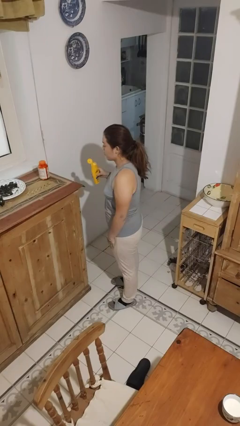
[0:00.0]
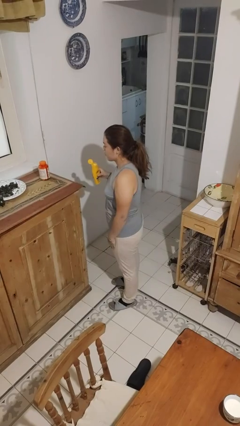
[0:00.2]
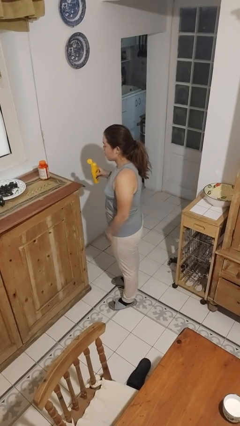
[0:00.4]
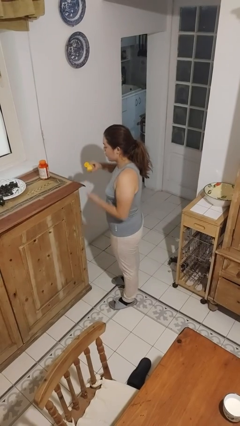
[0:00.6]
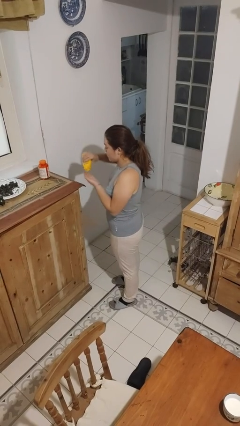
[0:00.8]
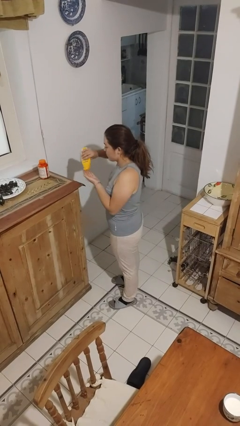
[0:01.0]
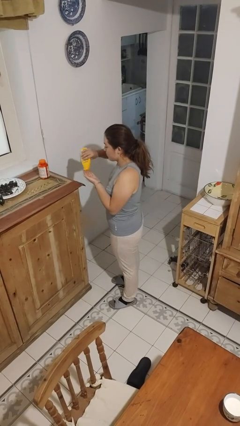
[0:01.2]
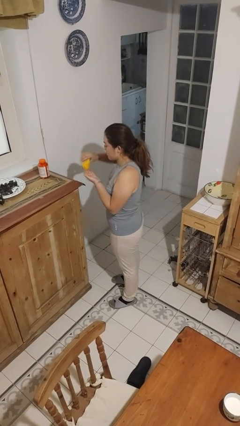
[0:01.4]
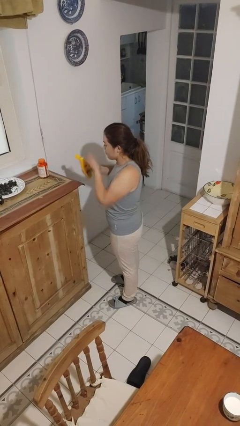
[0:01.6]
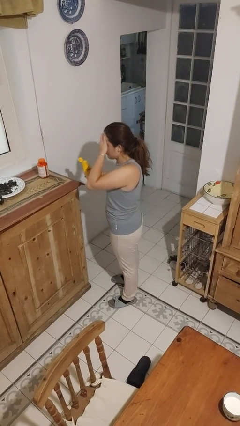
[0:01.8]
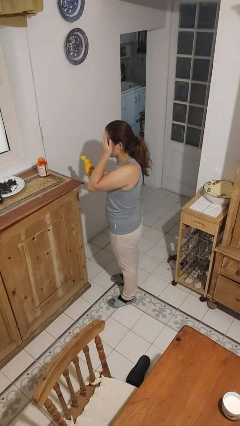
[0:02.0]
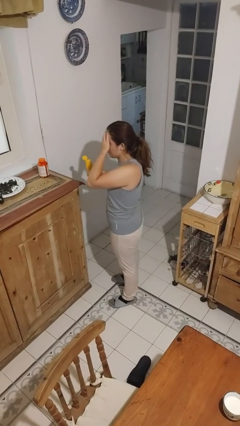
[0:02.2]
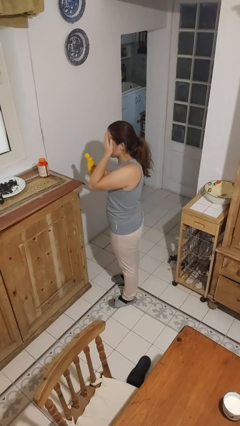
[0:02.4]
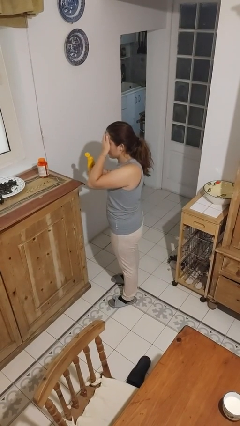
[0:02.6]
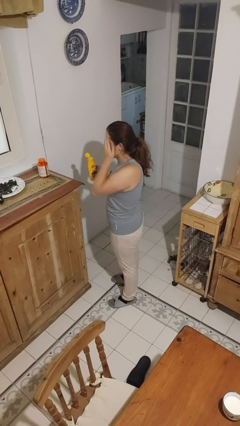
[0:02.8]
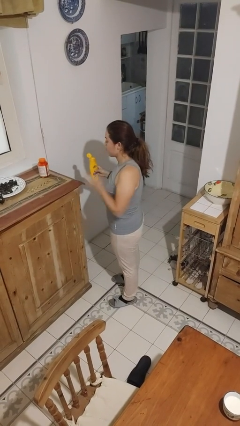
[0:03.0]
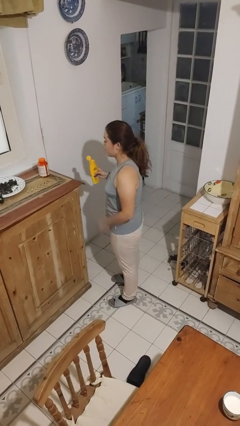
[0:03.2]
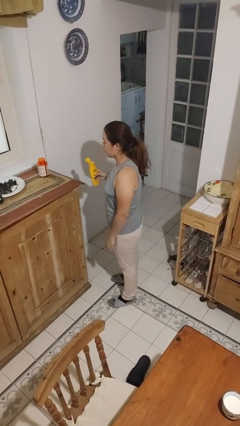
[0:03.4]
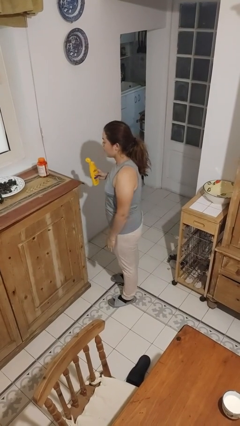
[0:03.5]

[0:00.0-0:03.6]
person applies sunscreen

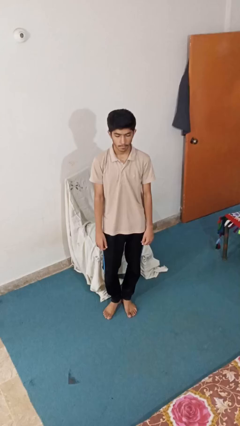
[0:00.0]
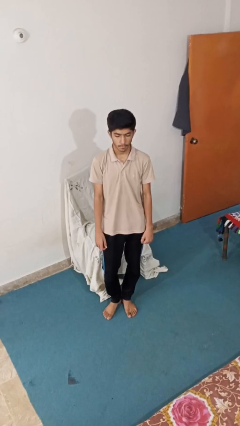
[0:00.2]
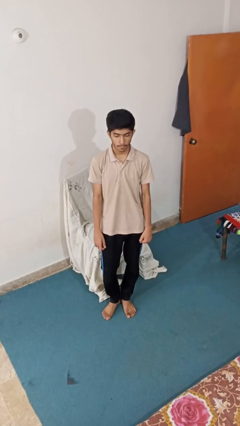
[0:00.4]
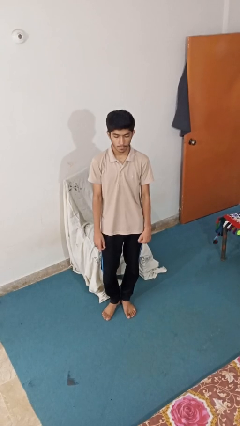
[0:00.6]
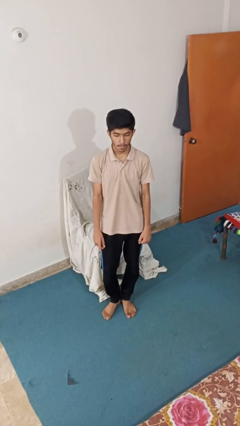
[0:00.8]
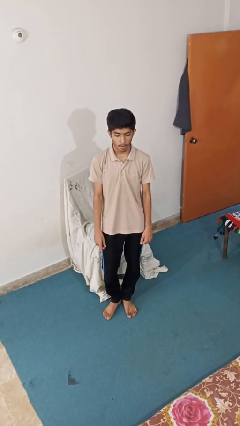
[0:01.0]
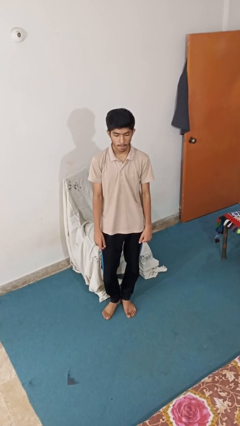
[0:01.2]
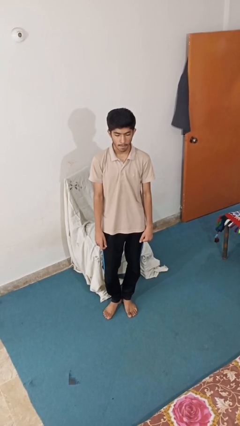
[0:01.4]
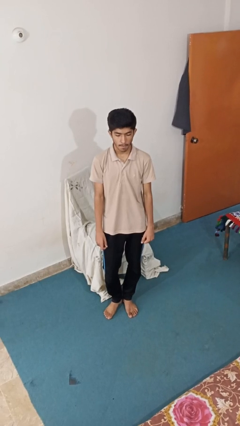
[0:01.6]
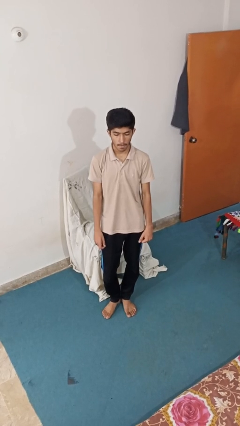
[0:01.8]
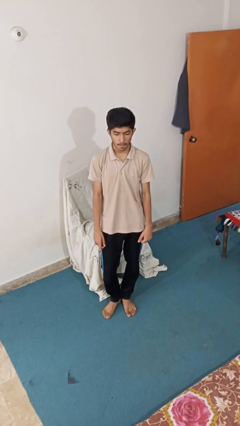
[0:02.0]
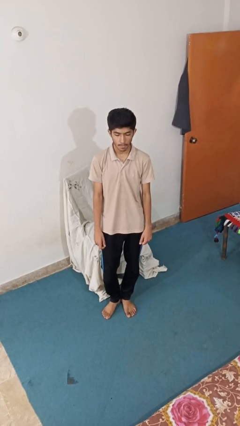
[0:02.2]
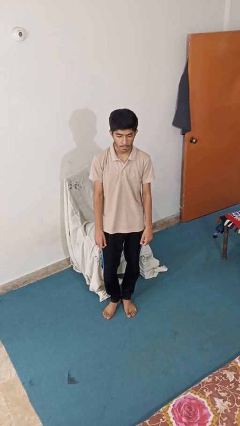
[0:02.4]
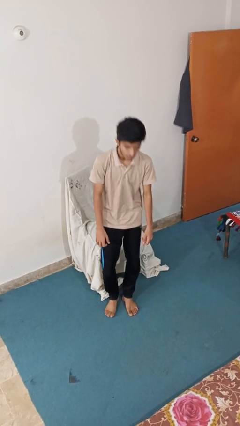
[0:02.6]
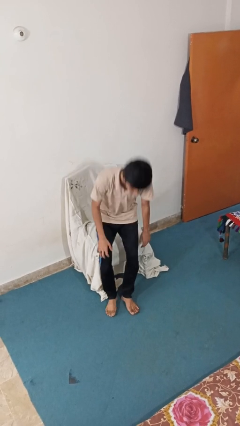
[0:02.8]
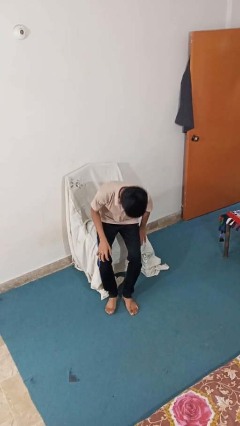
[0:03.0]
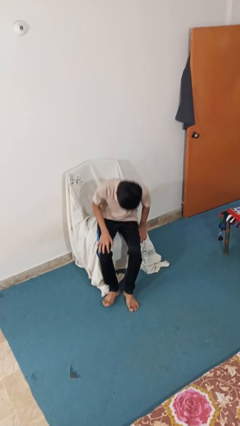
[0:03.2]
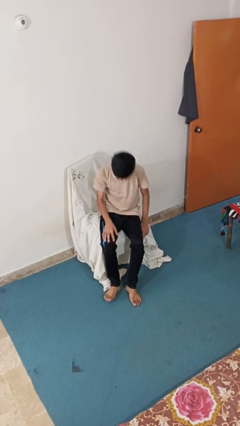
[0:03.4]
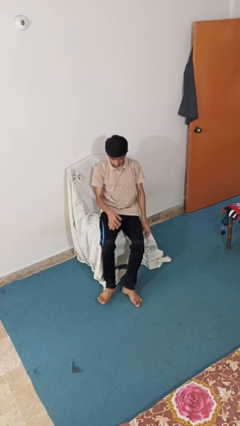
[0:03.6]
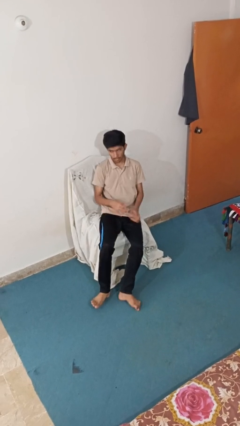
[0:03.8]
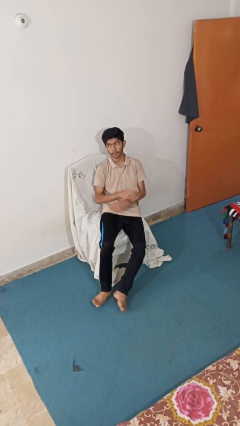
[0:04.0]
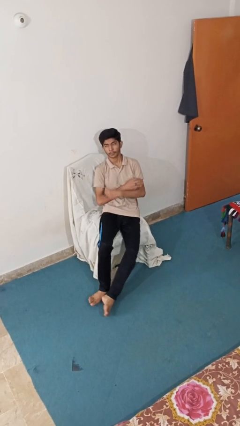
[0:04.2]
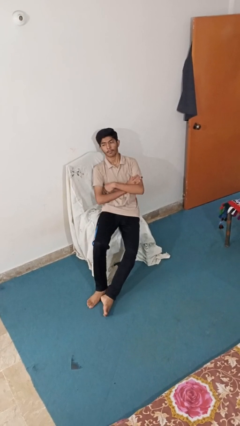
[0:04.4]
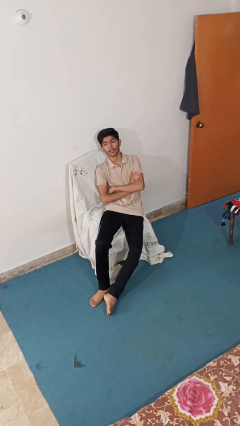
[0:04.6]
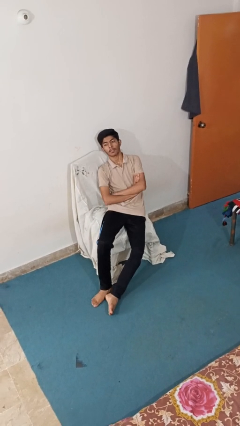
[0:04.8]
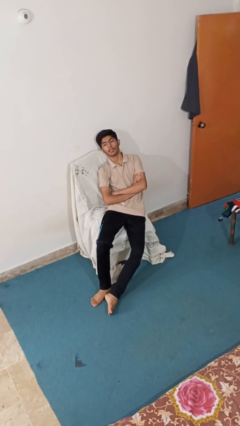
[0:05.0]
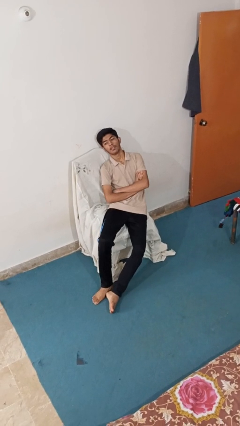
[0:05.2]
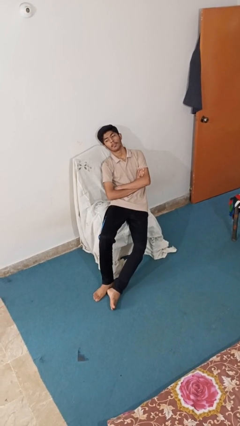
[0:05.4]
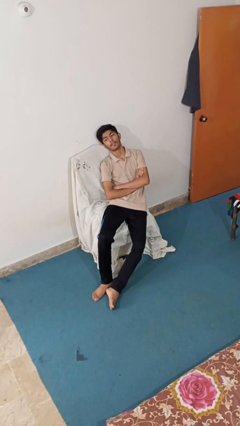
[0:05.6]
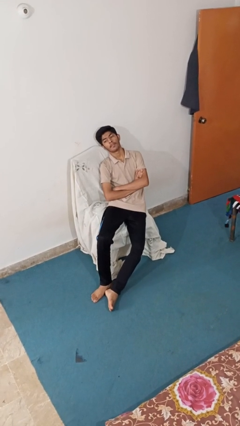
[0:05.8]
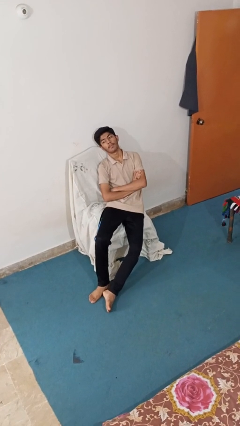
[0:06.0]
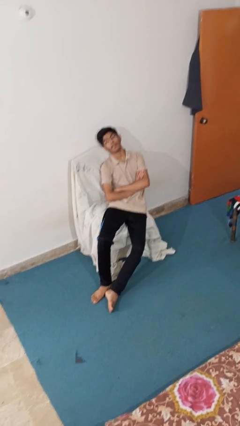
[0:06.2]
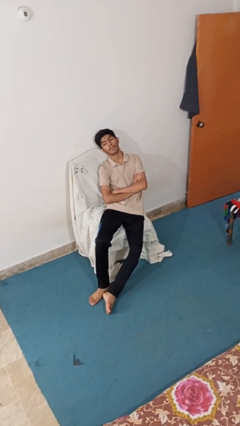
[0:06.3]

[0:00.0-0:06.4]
person lies down on couch

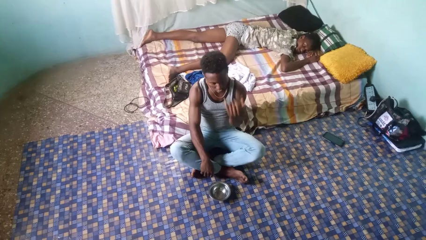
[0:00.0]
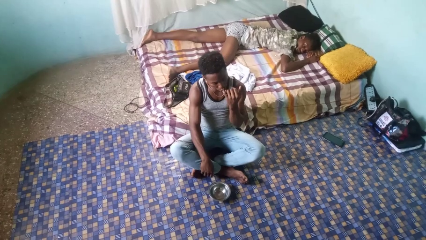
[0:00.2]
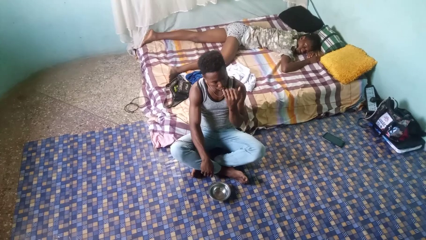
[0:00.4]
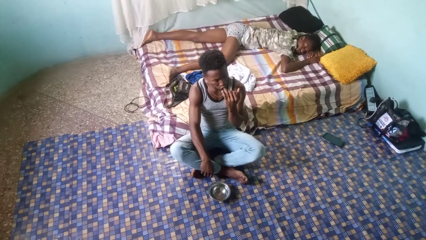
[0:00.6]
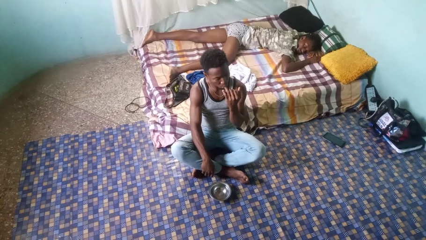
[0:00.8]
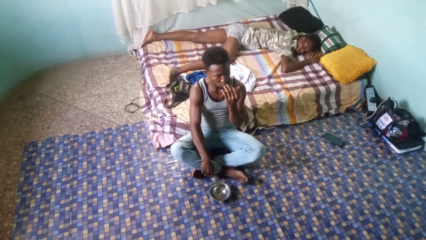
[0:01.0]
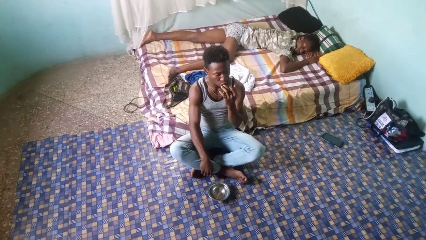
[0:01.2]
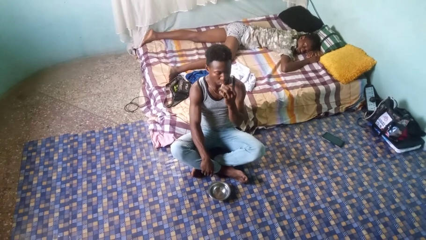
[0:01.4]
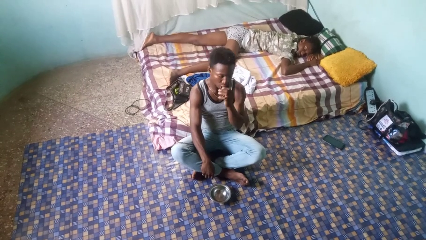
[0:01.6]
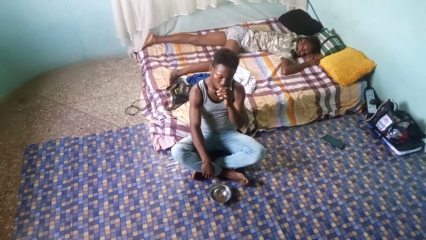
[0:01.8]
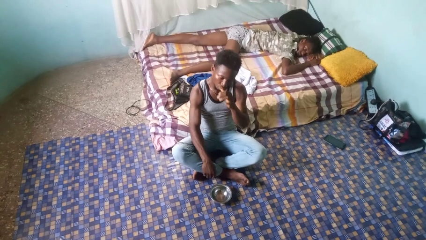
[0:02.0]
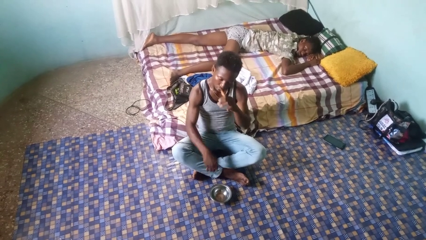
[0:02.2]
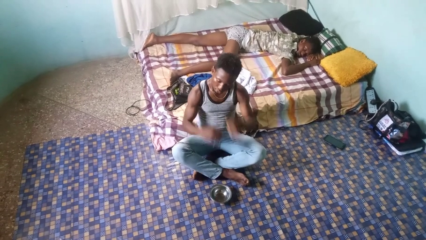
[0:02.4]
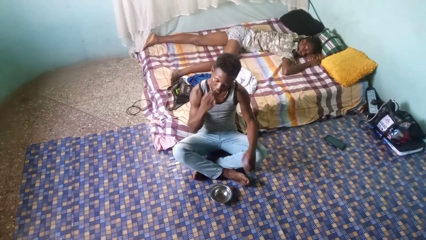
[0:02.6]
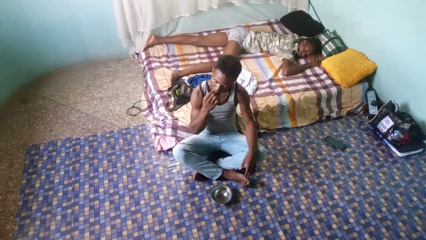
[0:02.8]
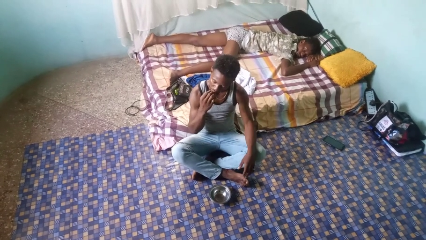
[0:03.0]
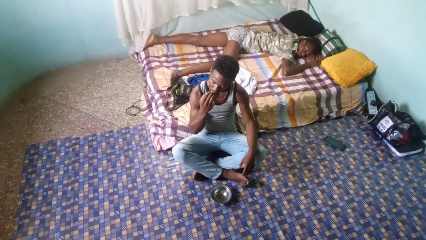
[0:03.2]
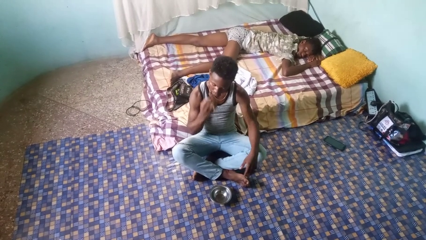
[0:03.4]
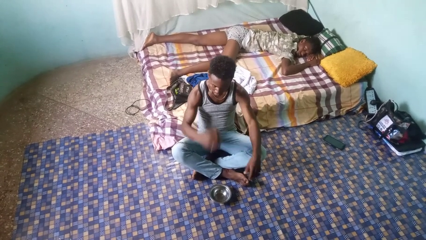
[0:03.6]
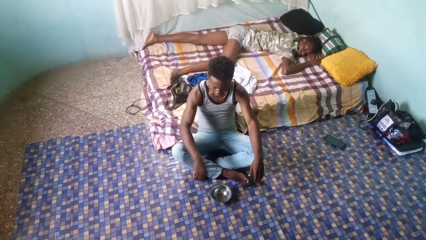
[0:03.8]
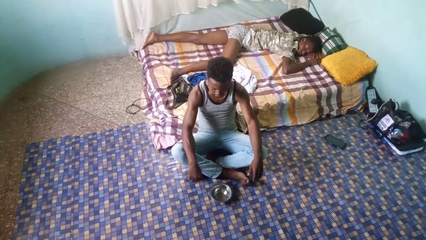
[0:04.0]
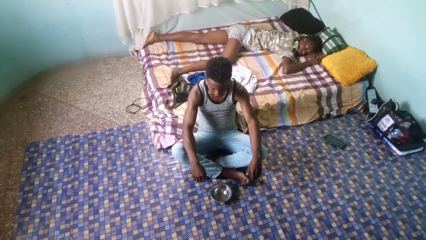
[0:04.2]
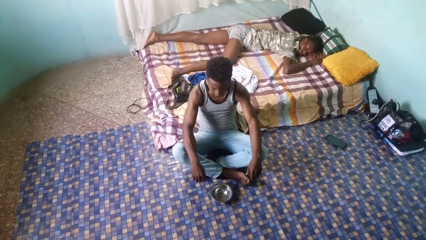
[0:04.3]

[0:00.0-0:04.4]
person licks fingers

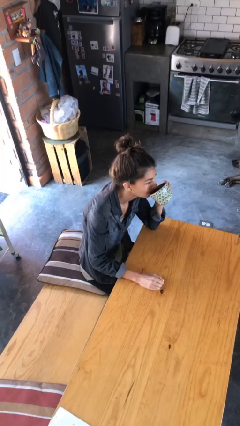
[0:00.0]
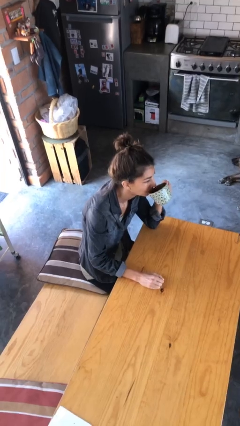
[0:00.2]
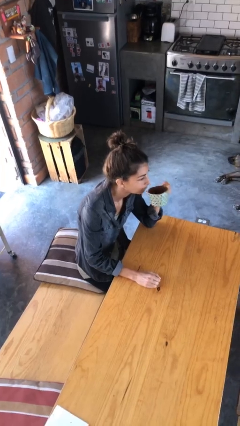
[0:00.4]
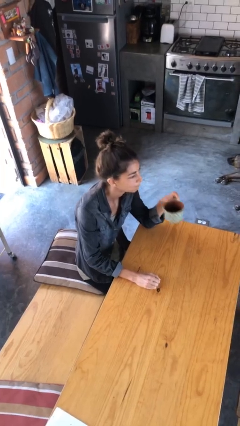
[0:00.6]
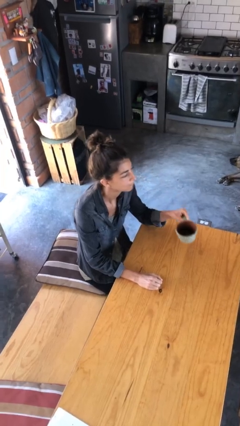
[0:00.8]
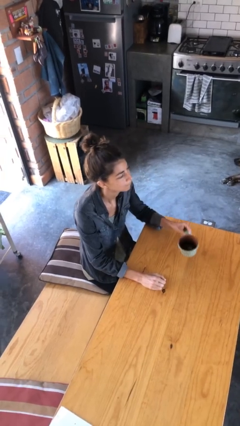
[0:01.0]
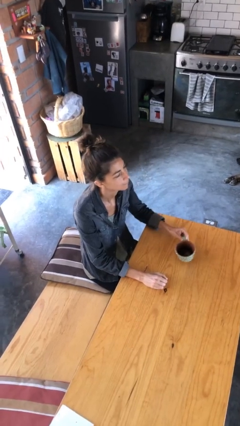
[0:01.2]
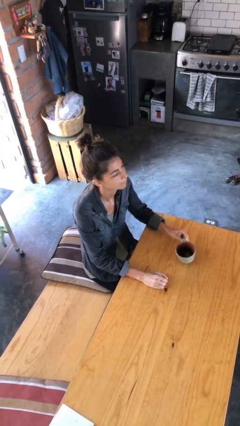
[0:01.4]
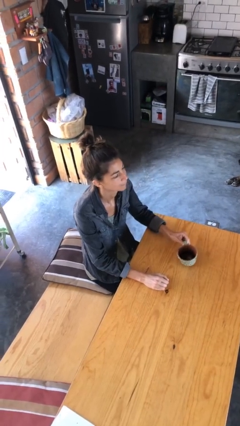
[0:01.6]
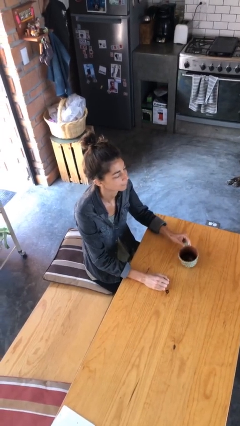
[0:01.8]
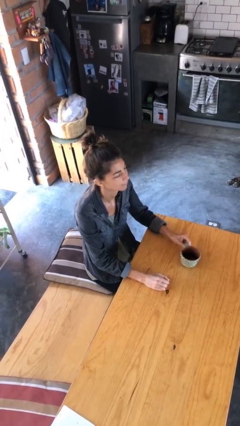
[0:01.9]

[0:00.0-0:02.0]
person puts down object on table

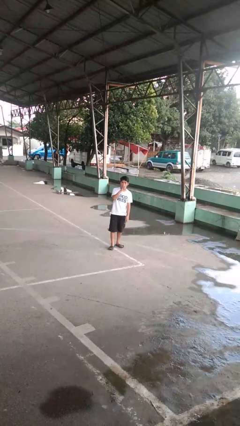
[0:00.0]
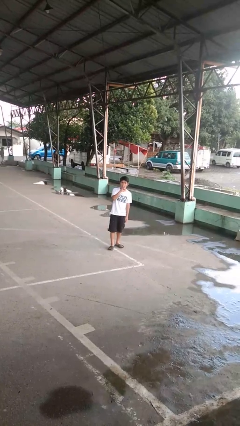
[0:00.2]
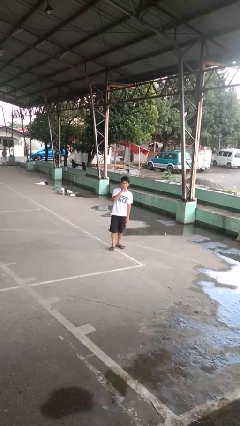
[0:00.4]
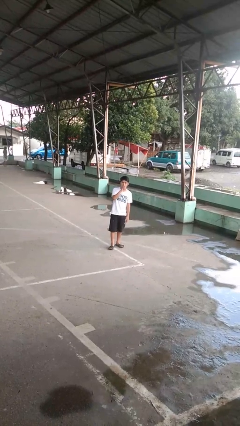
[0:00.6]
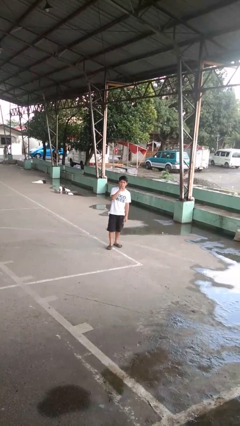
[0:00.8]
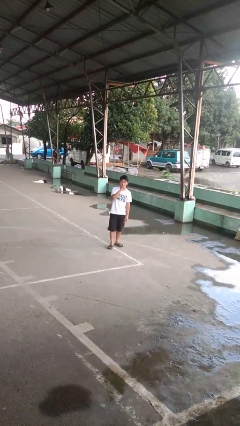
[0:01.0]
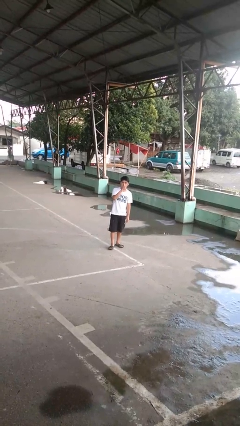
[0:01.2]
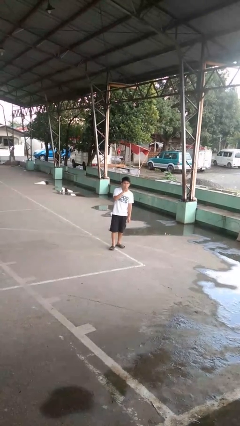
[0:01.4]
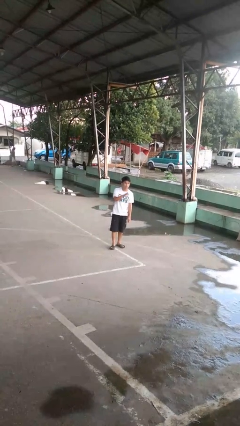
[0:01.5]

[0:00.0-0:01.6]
person gestures be quiet
